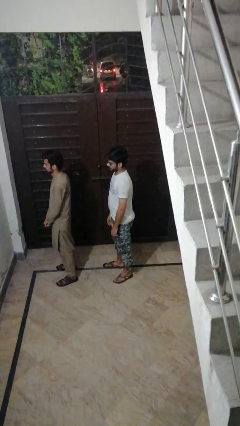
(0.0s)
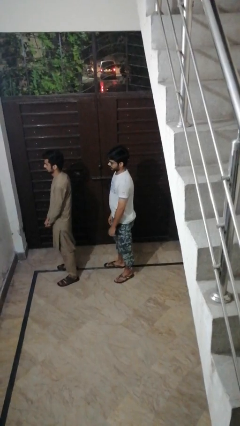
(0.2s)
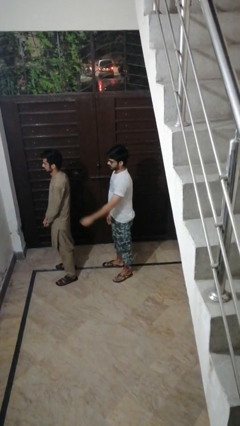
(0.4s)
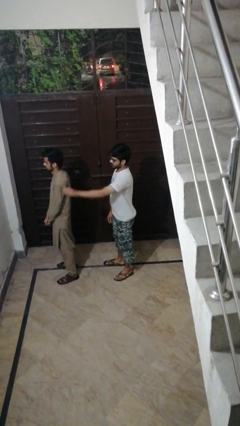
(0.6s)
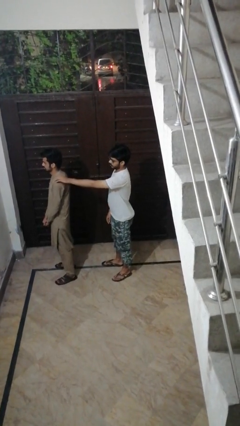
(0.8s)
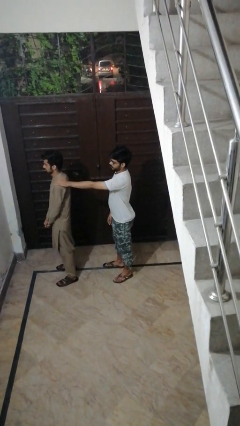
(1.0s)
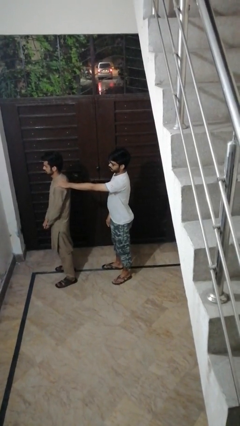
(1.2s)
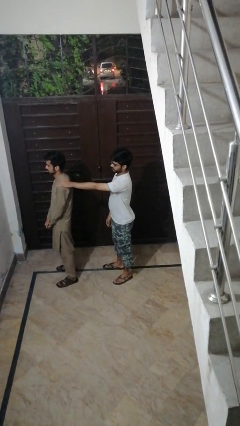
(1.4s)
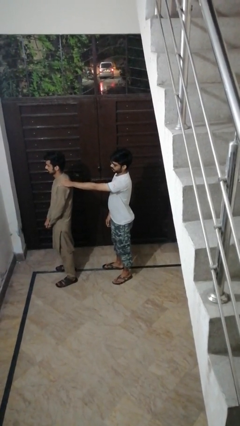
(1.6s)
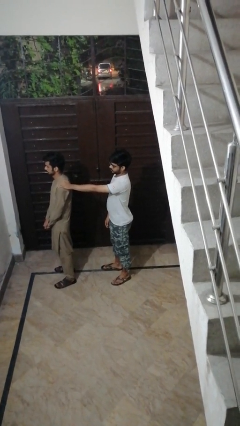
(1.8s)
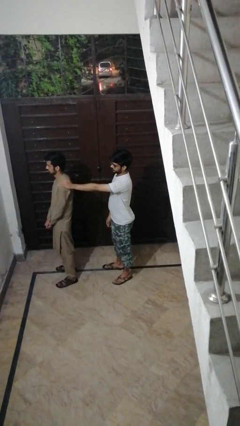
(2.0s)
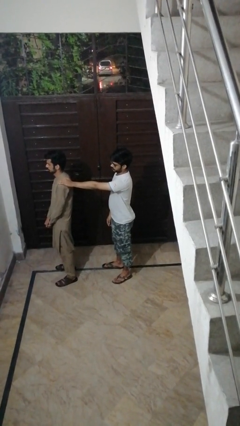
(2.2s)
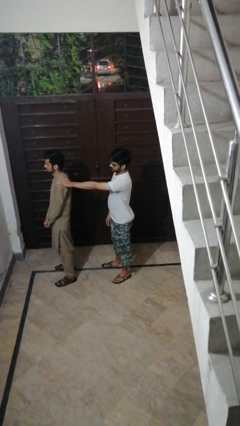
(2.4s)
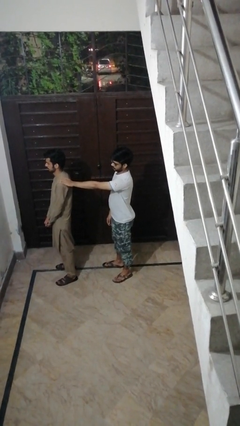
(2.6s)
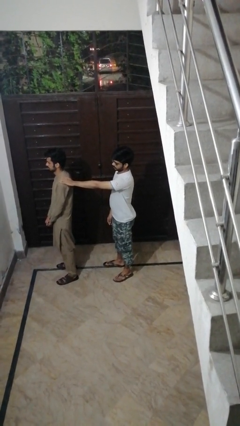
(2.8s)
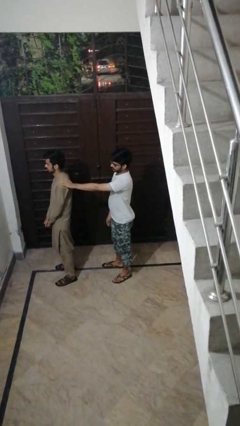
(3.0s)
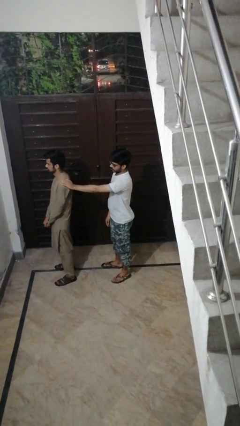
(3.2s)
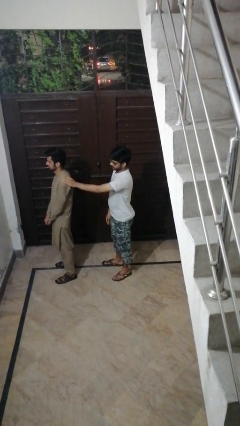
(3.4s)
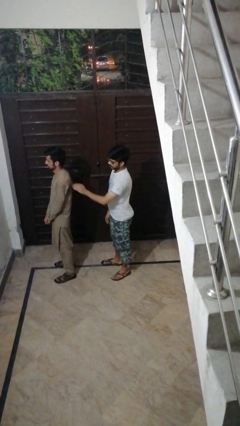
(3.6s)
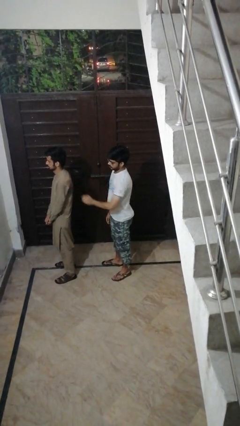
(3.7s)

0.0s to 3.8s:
person touches back of person

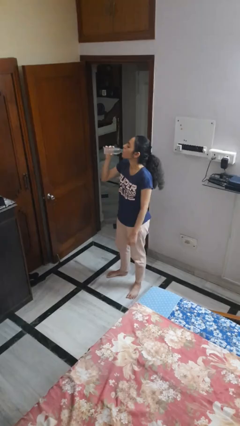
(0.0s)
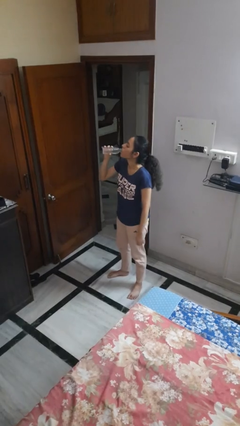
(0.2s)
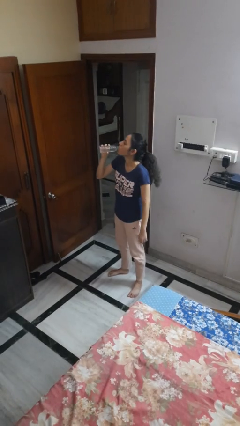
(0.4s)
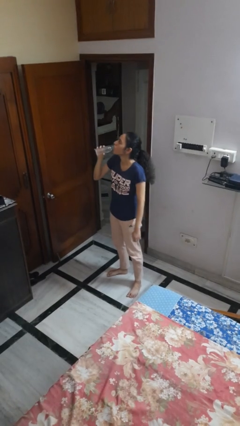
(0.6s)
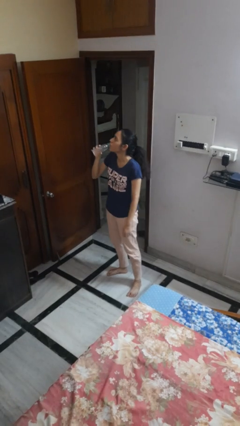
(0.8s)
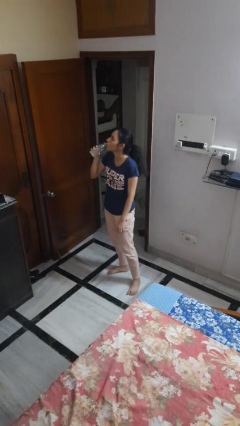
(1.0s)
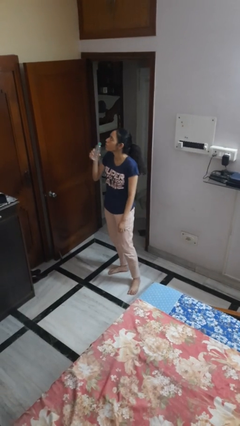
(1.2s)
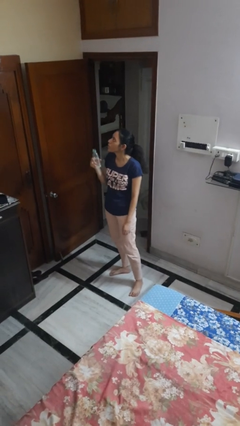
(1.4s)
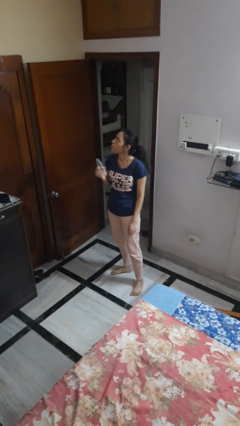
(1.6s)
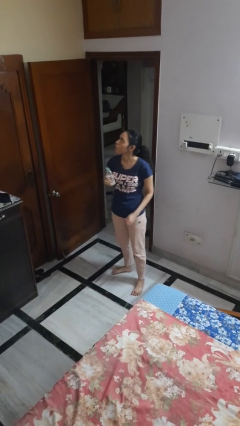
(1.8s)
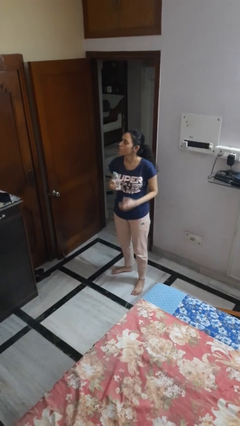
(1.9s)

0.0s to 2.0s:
person drinks from bottle

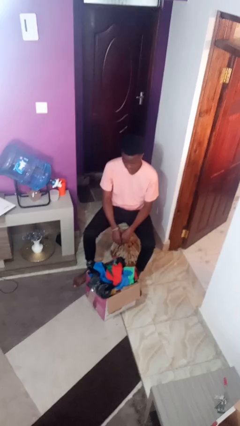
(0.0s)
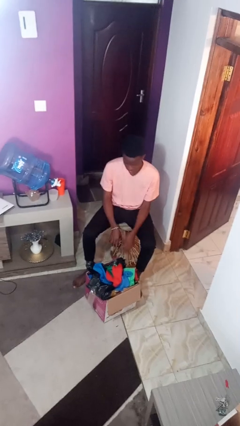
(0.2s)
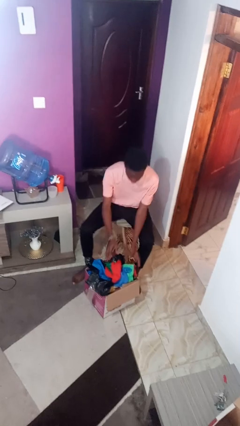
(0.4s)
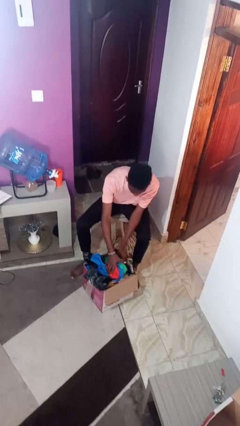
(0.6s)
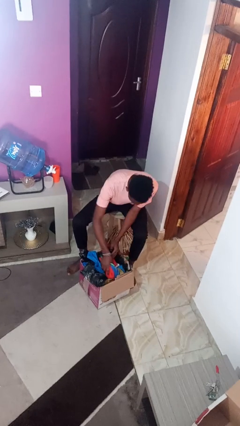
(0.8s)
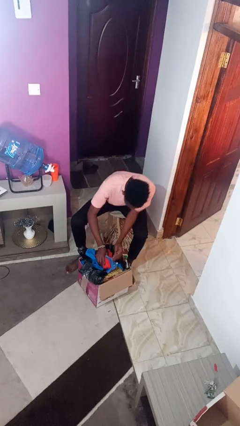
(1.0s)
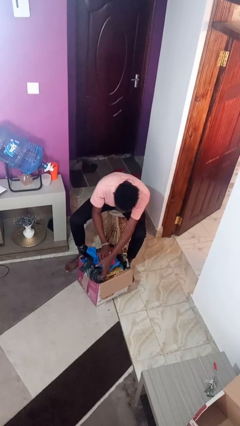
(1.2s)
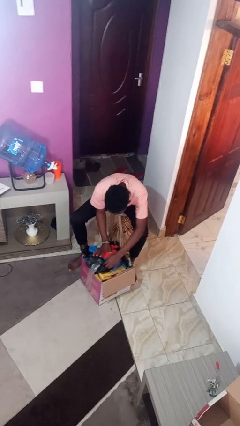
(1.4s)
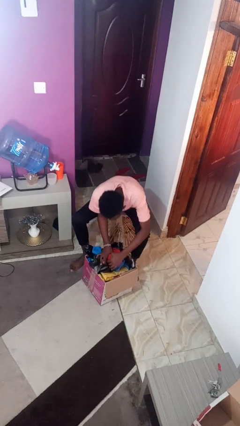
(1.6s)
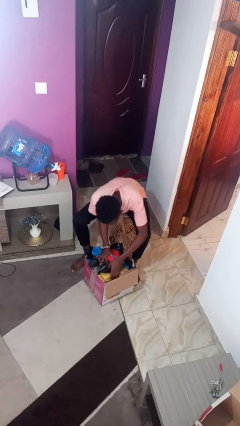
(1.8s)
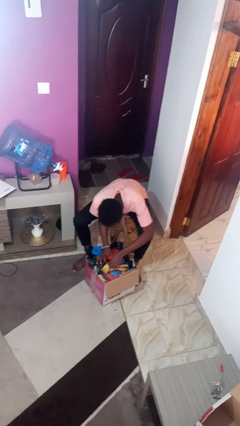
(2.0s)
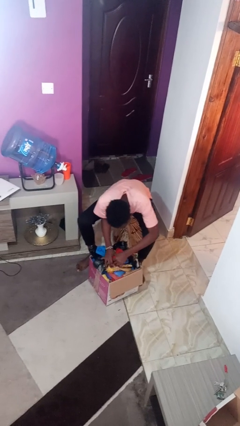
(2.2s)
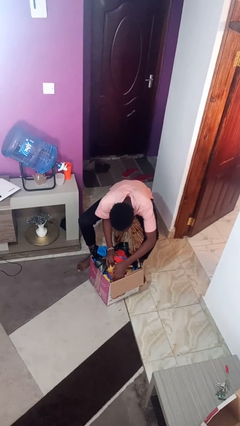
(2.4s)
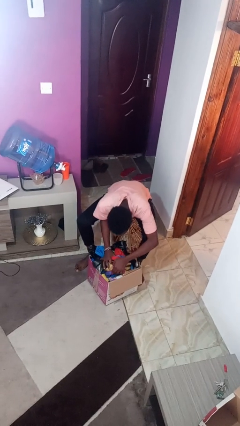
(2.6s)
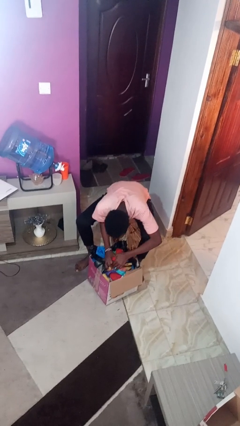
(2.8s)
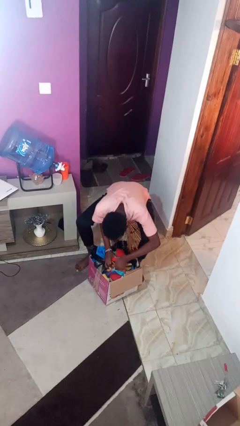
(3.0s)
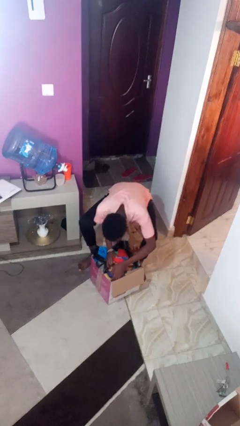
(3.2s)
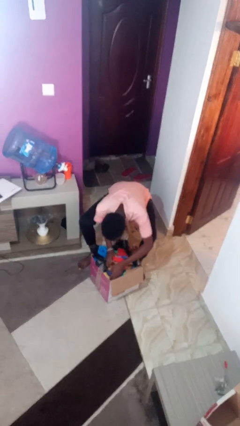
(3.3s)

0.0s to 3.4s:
person searches in box

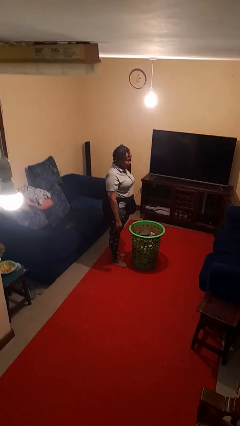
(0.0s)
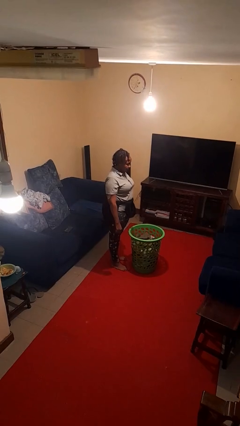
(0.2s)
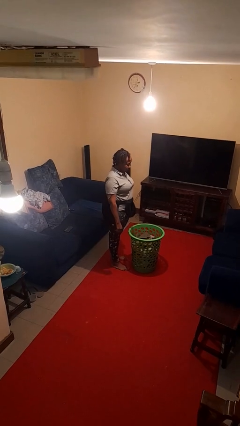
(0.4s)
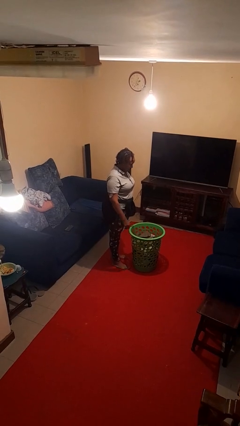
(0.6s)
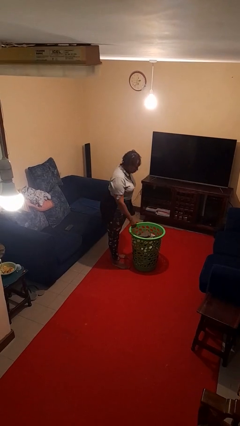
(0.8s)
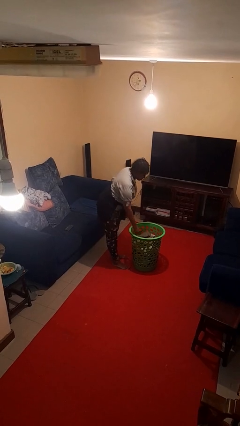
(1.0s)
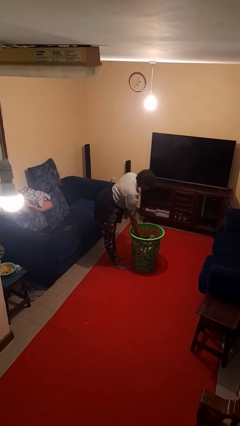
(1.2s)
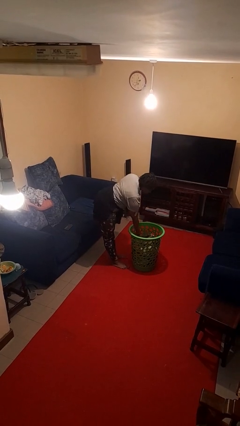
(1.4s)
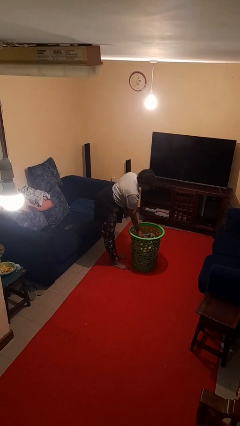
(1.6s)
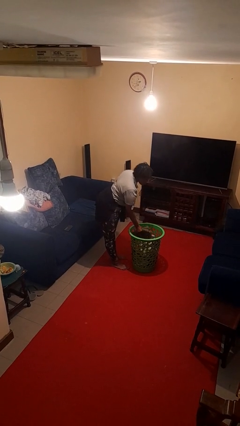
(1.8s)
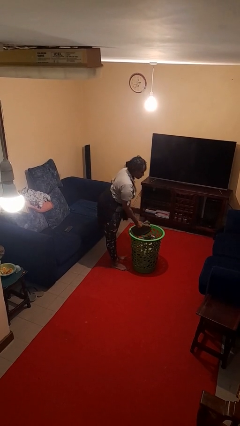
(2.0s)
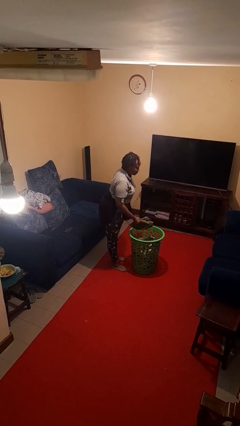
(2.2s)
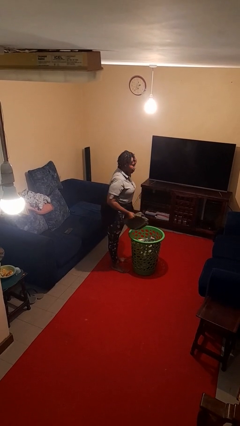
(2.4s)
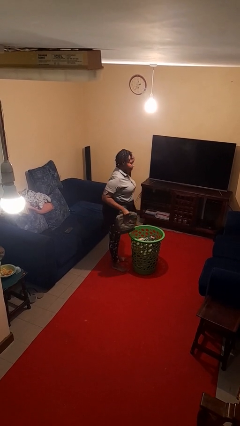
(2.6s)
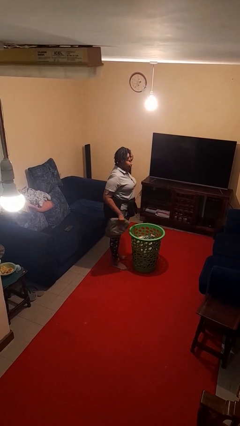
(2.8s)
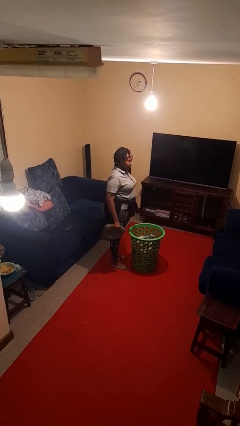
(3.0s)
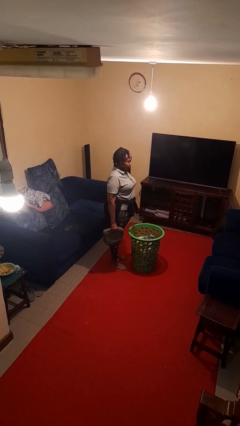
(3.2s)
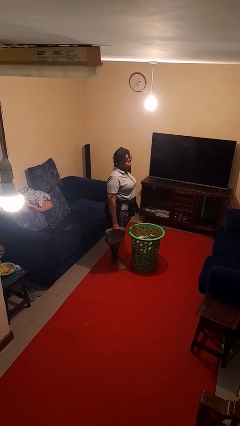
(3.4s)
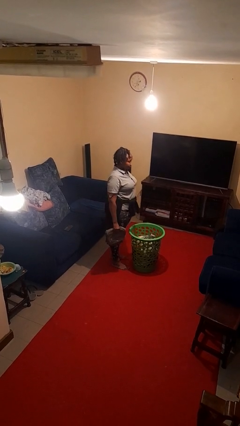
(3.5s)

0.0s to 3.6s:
person takes object from basket

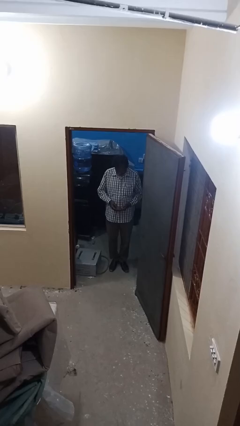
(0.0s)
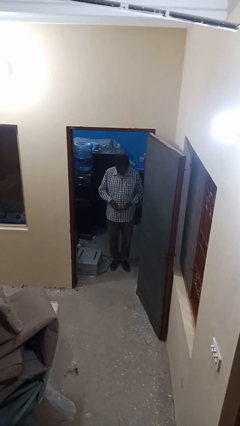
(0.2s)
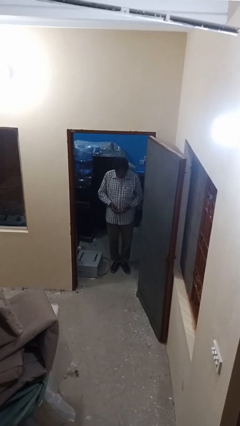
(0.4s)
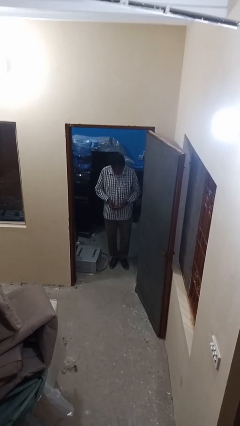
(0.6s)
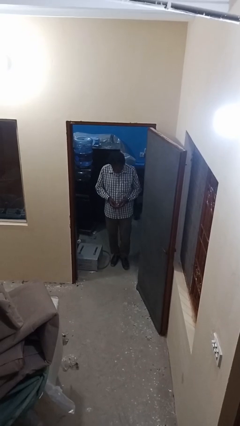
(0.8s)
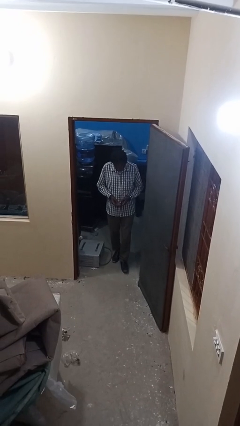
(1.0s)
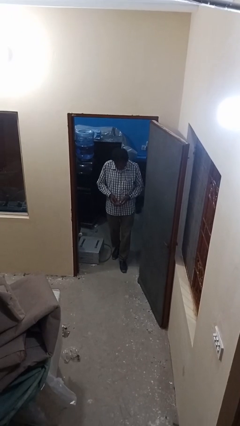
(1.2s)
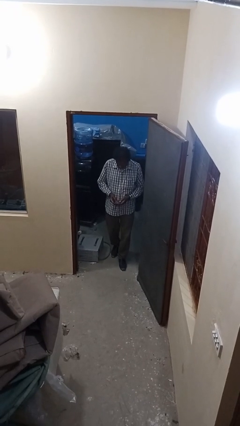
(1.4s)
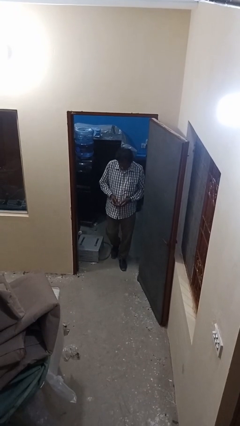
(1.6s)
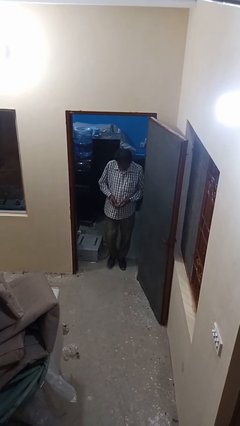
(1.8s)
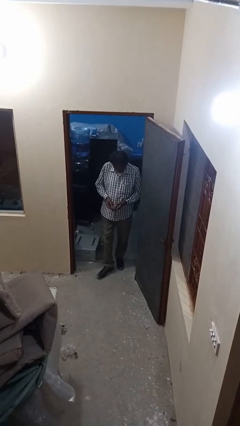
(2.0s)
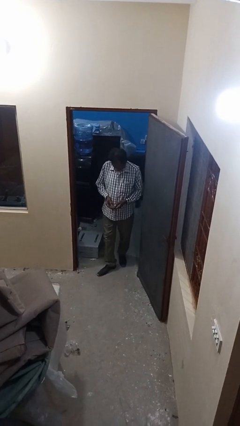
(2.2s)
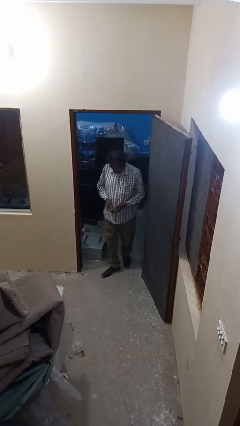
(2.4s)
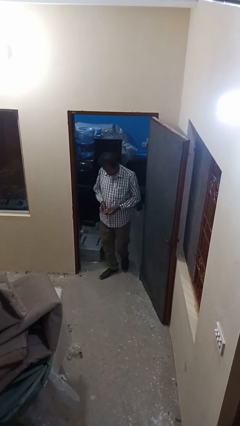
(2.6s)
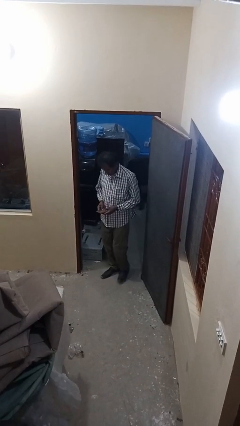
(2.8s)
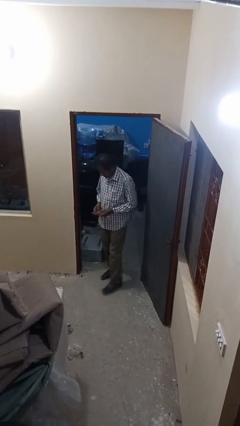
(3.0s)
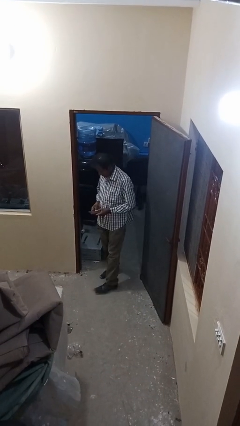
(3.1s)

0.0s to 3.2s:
person enters scene through structure

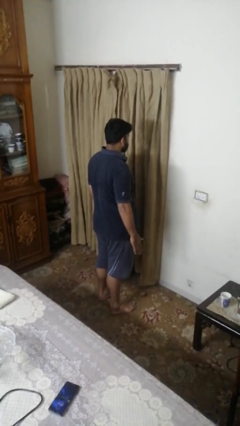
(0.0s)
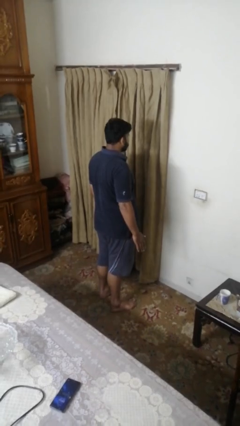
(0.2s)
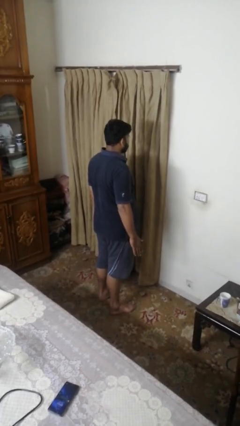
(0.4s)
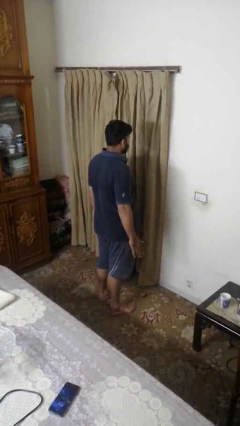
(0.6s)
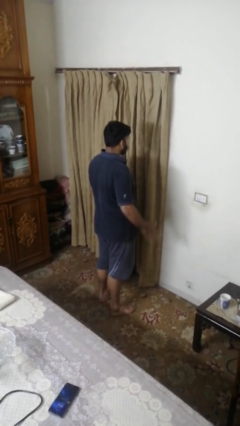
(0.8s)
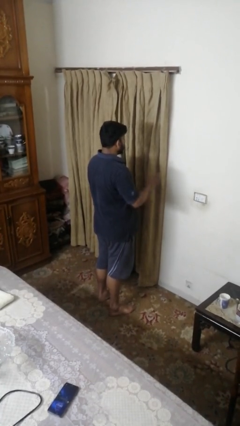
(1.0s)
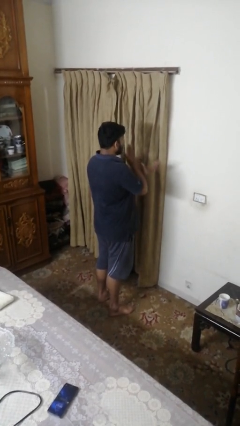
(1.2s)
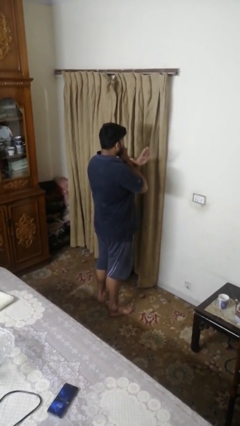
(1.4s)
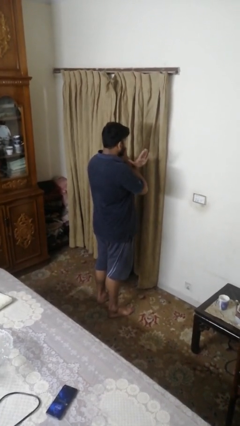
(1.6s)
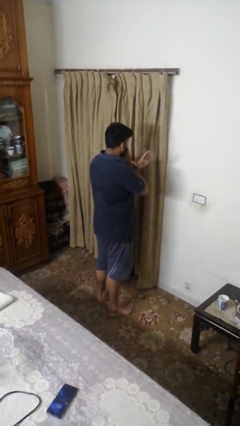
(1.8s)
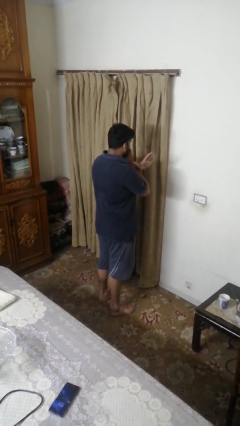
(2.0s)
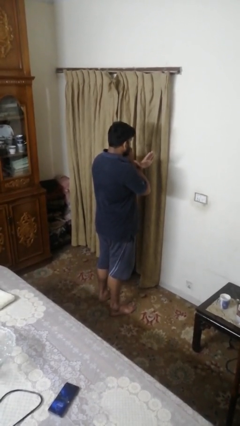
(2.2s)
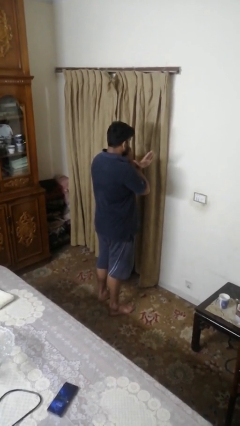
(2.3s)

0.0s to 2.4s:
person gestures arms x
